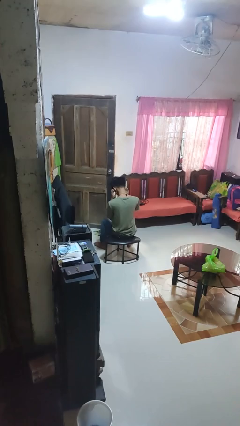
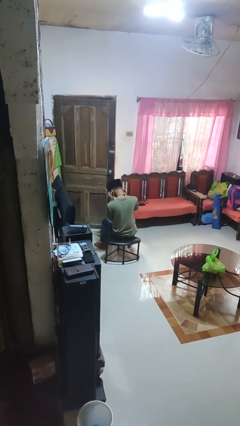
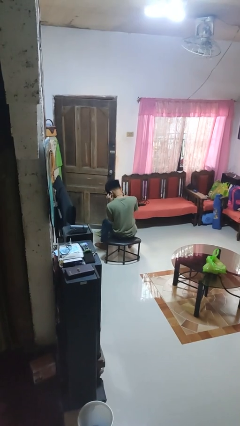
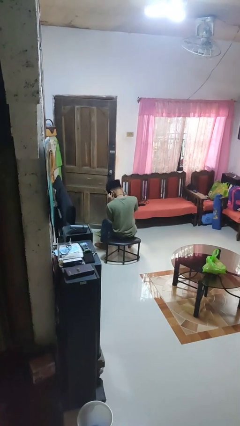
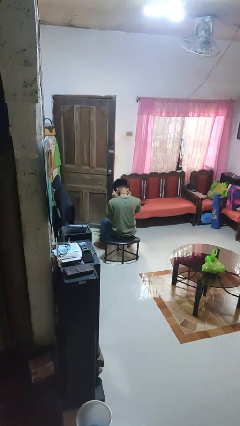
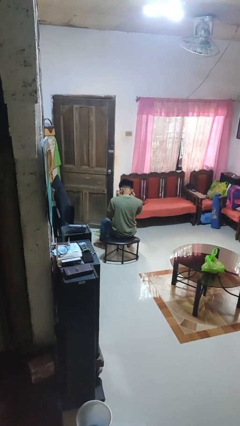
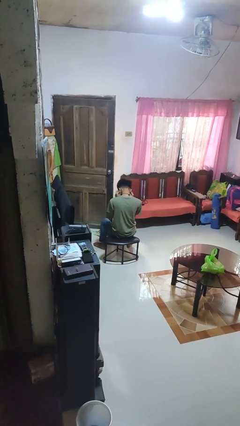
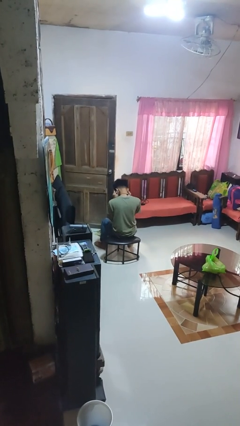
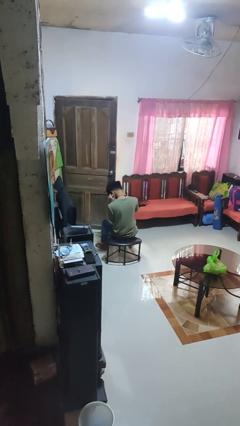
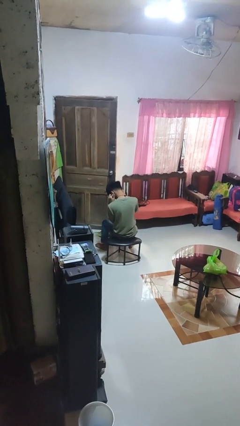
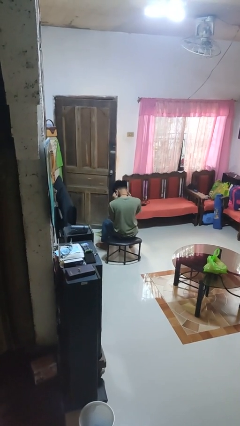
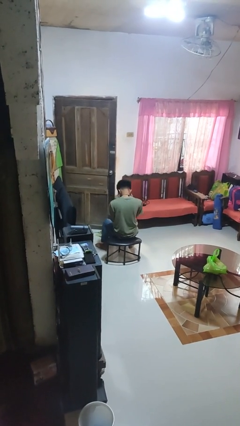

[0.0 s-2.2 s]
person puts fingers in ear

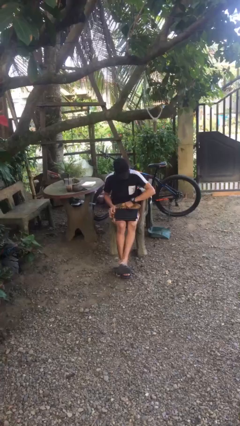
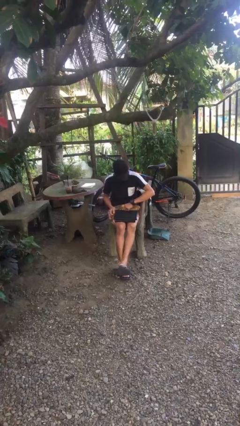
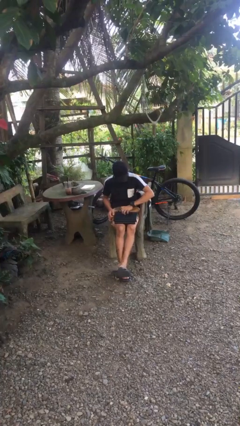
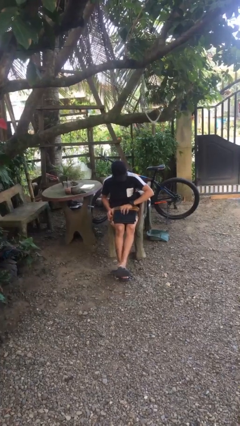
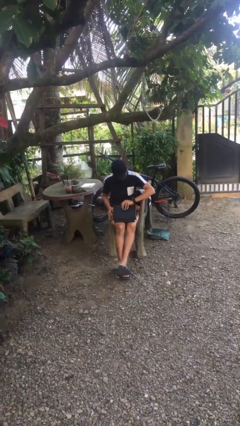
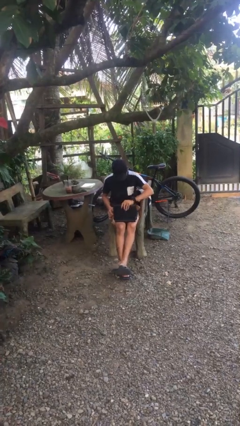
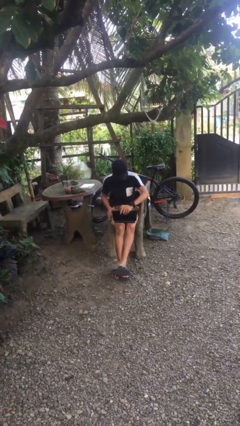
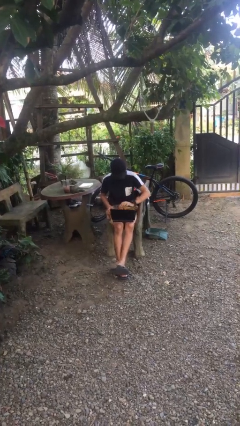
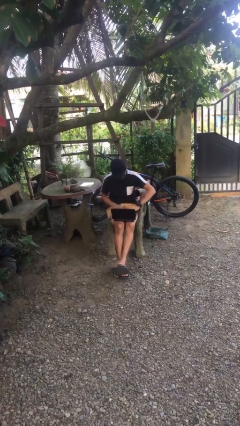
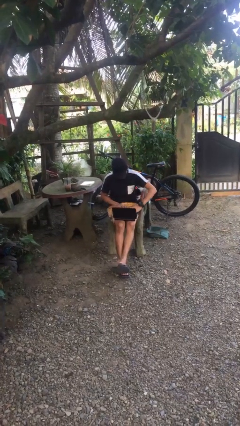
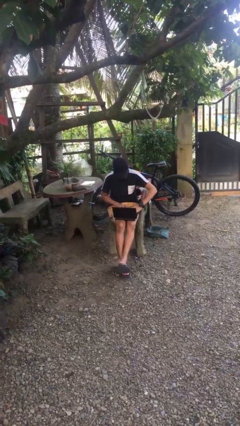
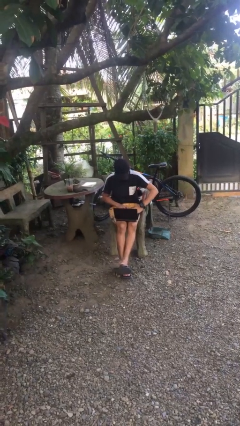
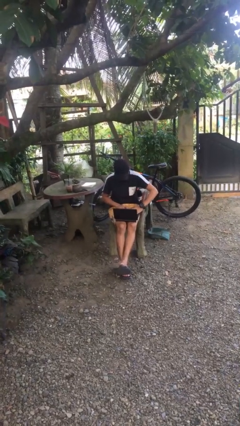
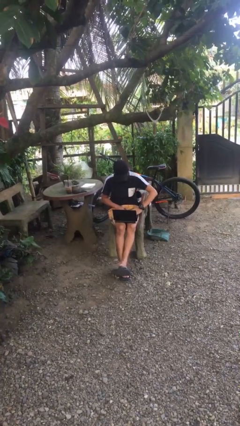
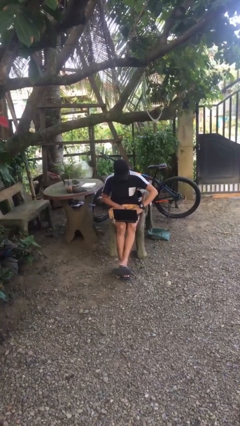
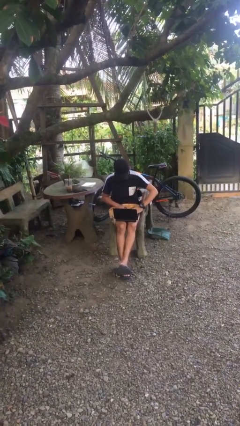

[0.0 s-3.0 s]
person interacts with laptop

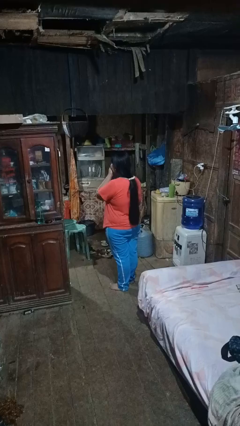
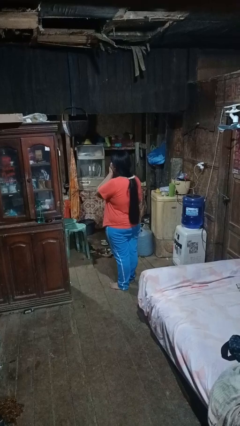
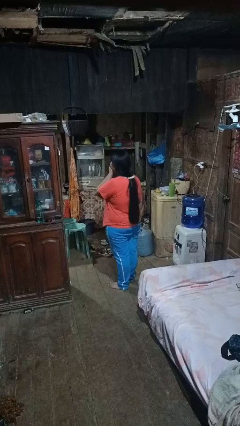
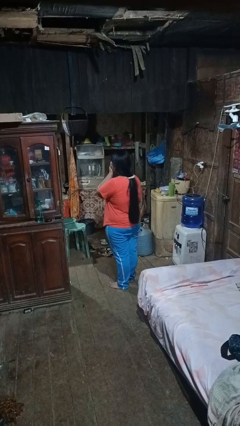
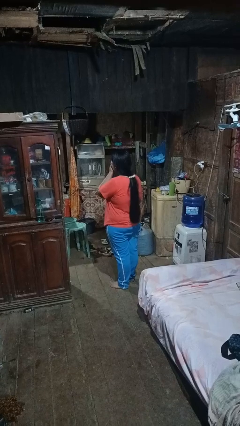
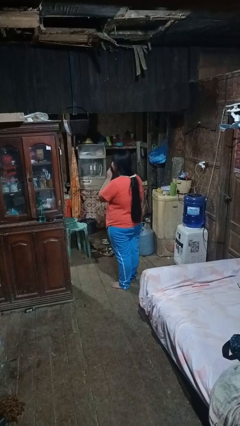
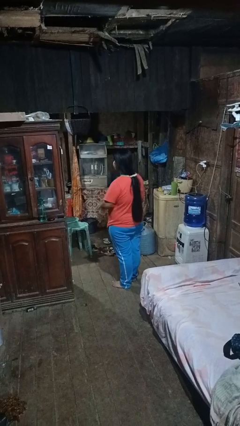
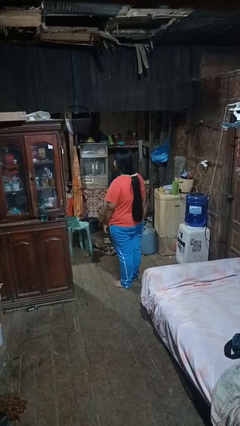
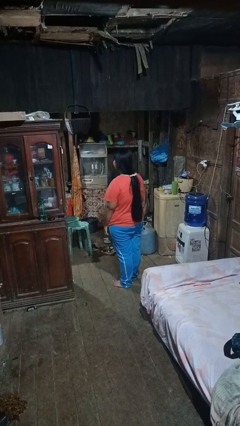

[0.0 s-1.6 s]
person yawns

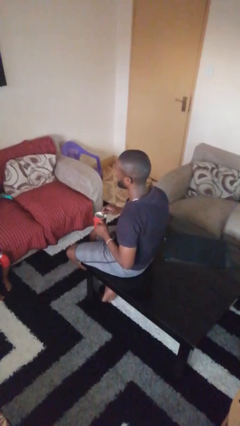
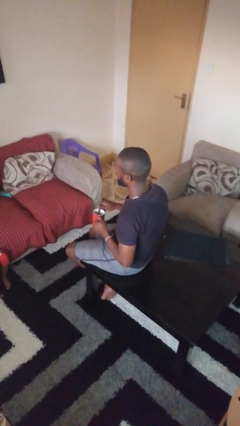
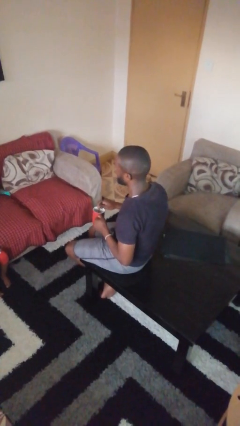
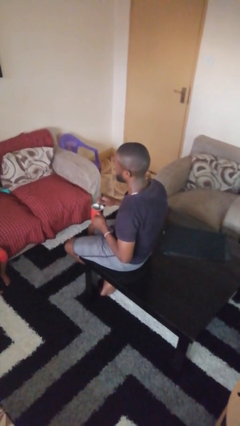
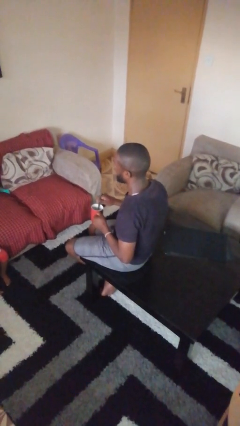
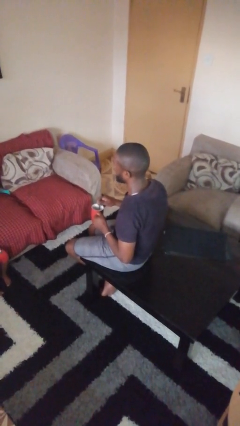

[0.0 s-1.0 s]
person stirs mug

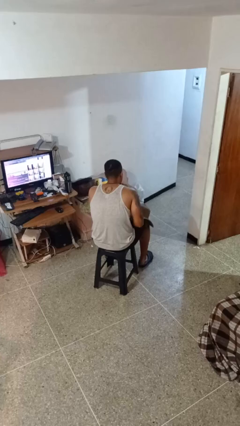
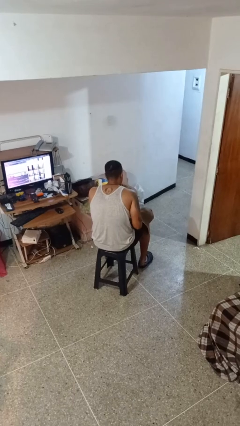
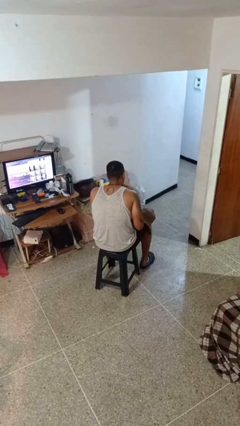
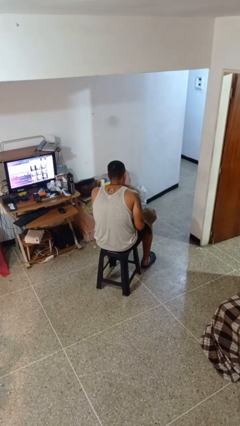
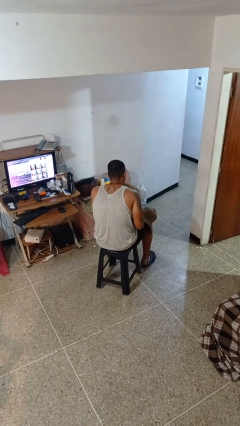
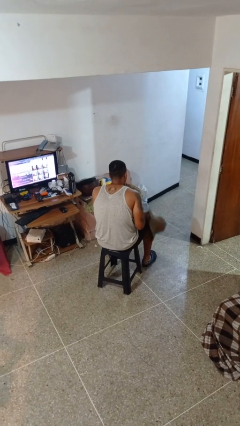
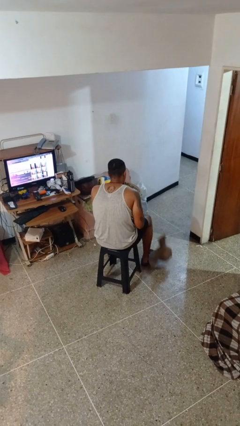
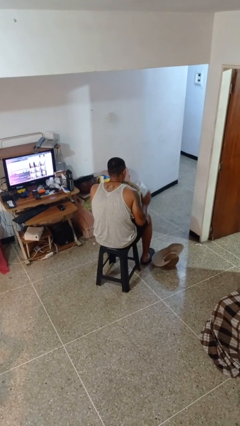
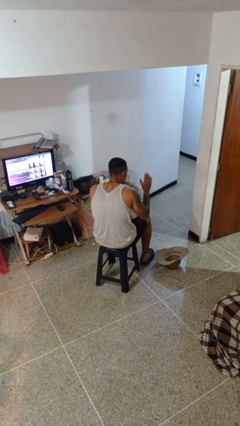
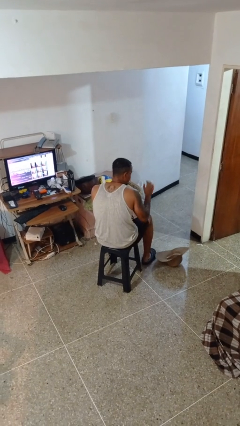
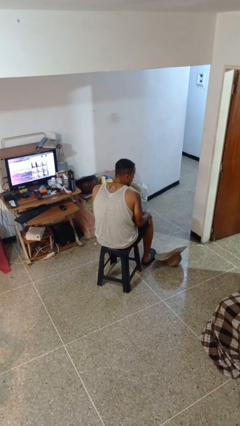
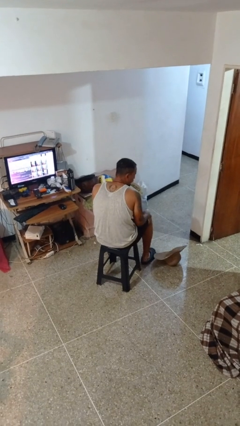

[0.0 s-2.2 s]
person drops object

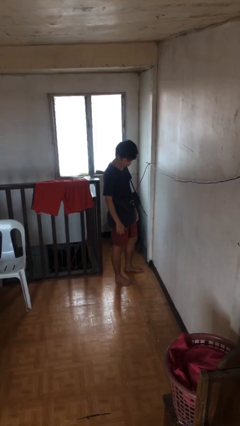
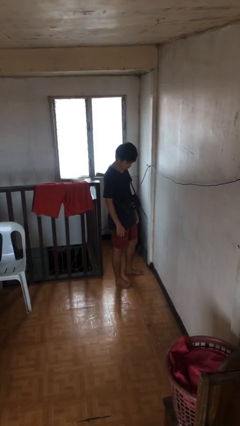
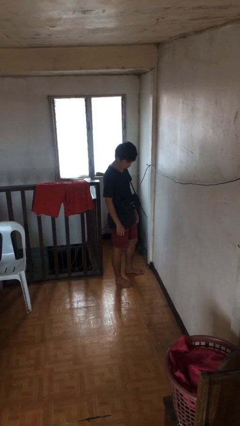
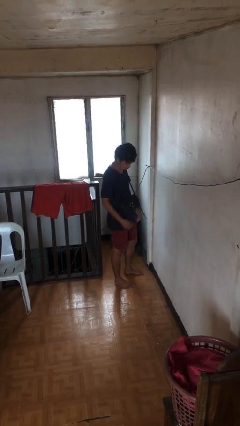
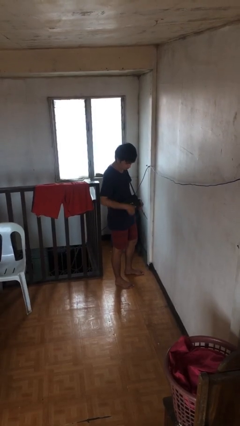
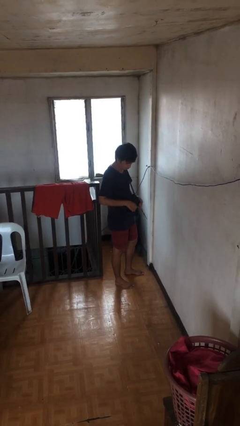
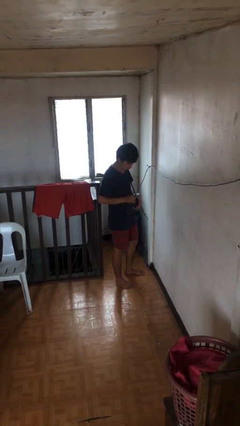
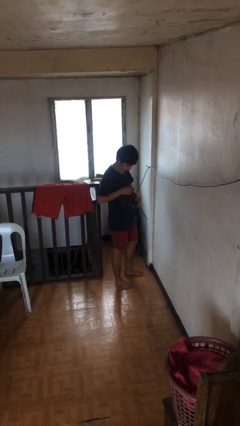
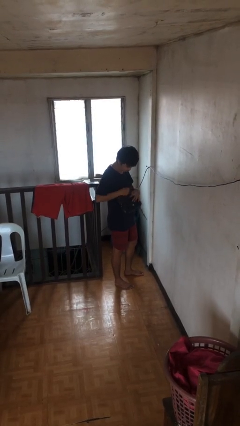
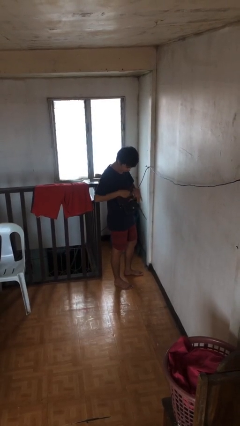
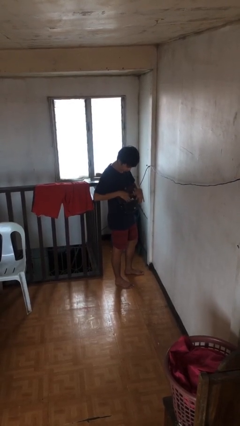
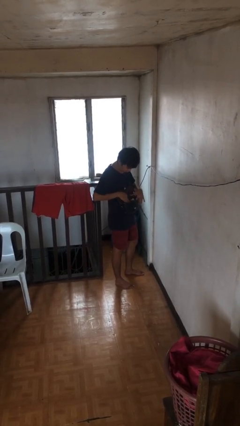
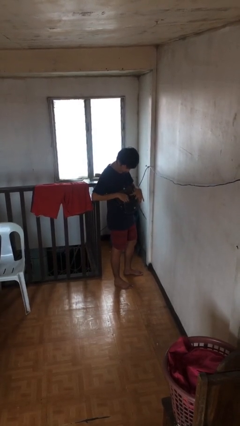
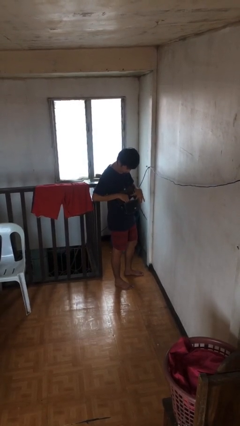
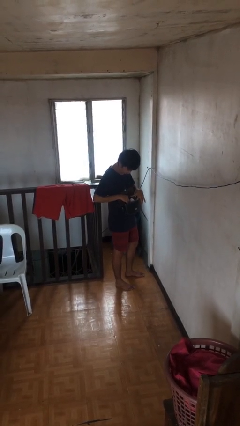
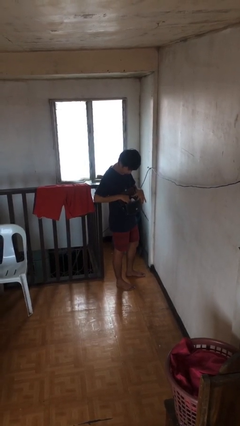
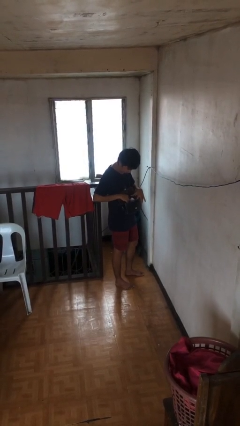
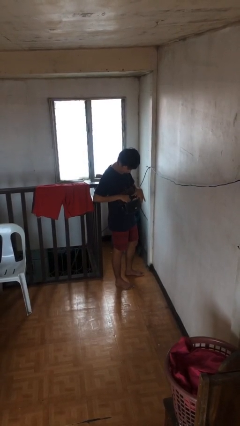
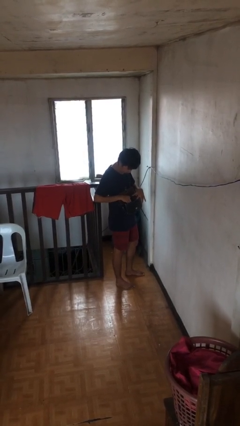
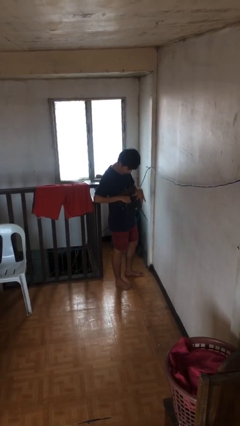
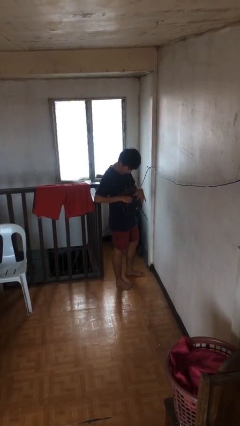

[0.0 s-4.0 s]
person searches in purse

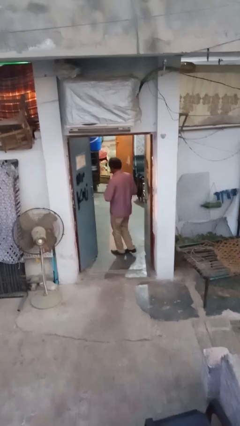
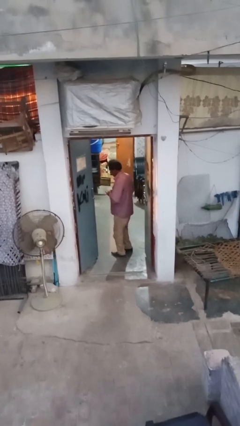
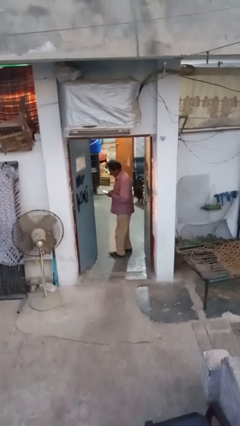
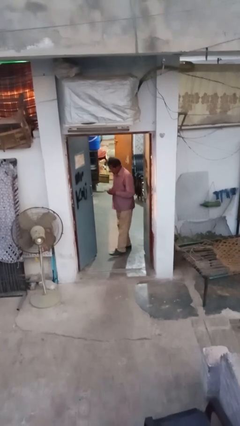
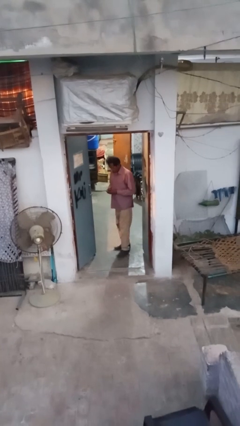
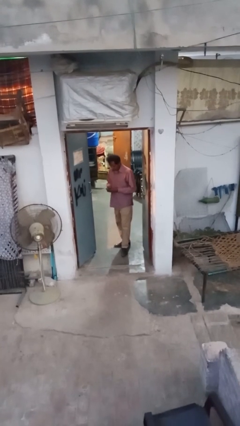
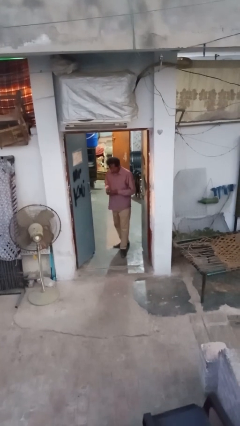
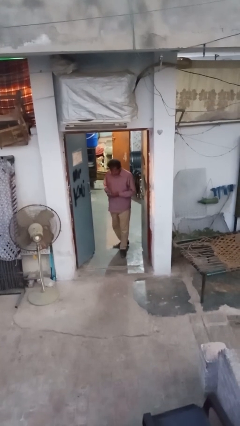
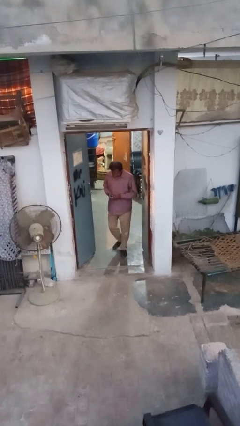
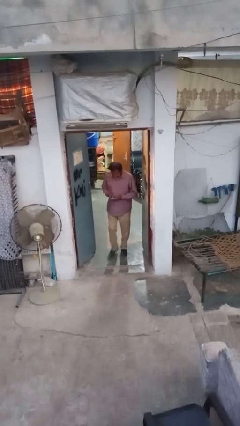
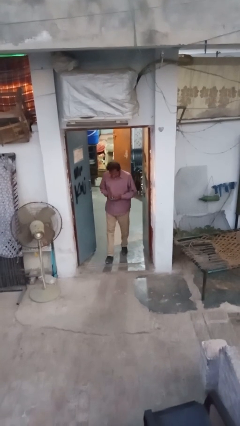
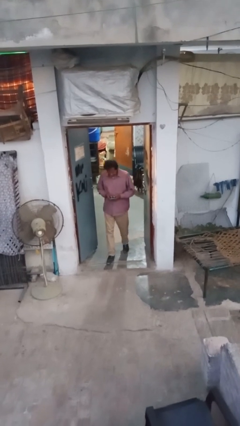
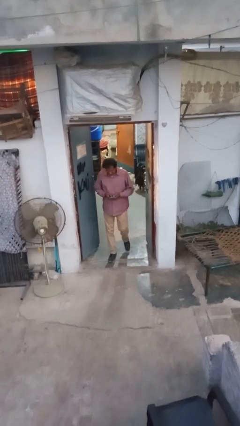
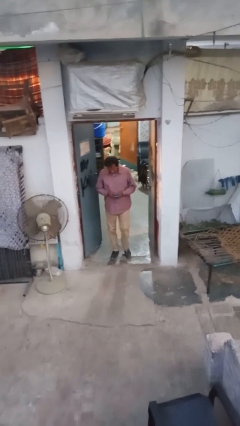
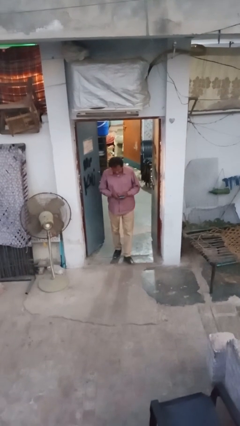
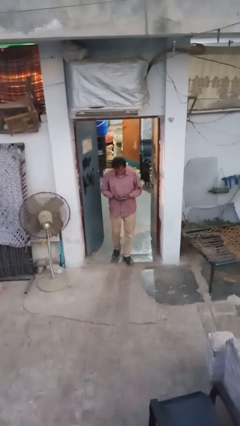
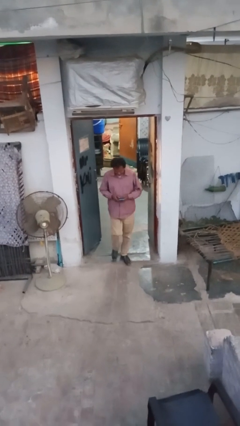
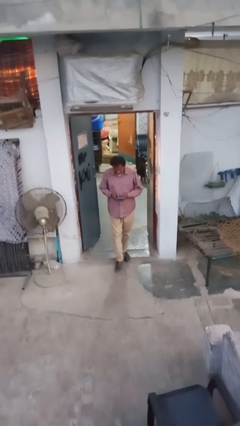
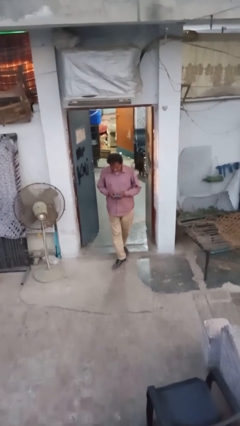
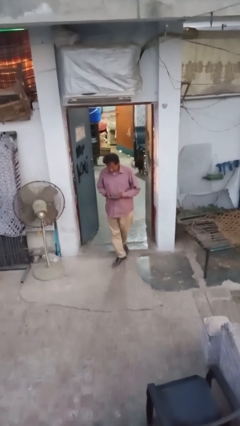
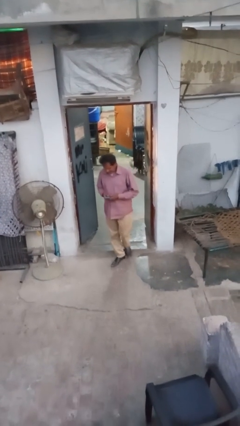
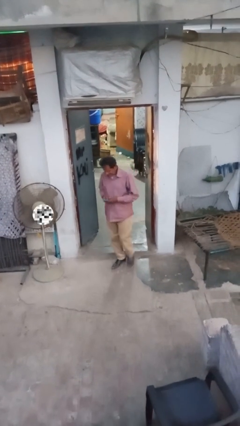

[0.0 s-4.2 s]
person enters scene through structure
